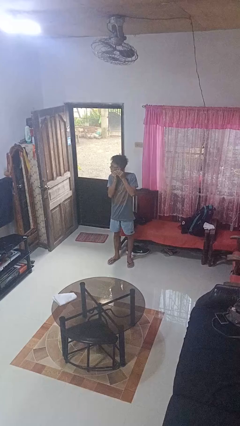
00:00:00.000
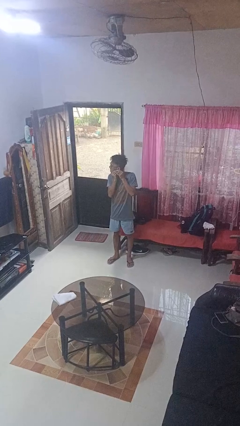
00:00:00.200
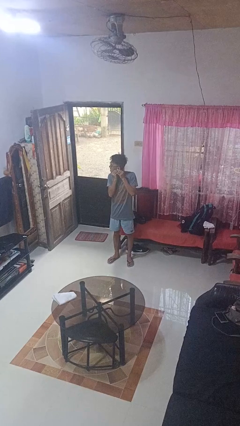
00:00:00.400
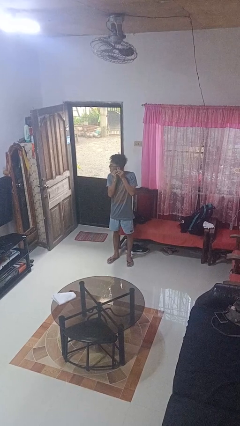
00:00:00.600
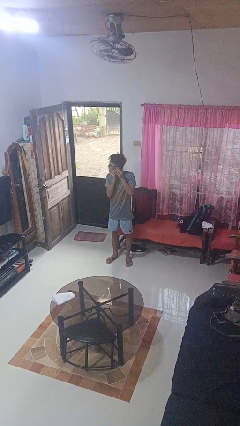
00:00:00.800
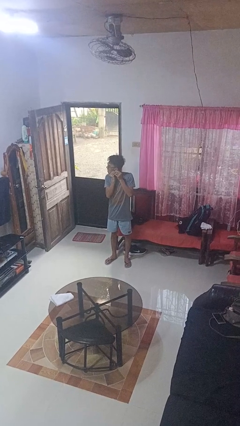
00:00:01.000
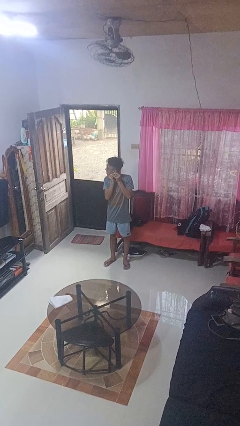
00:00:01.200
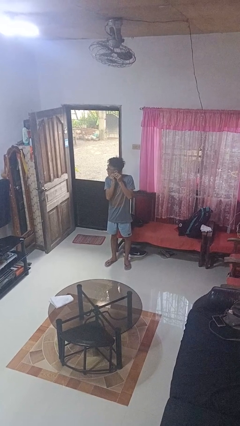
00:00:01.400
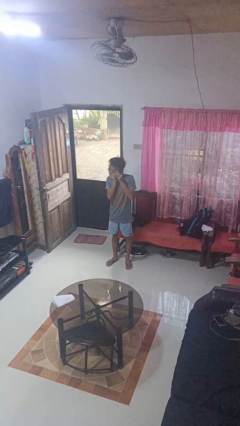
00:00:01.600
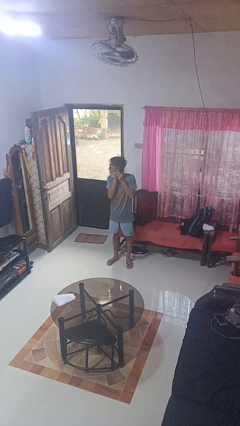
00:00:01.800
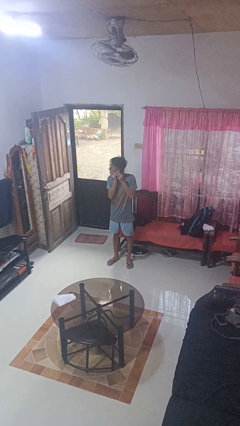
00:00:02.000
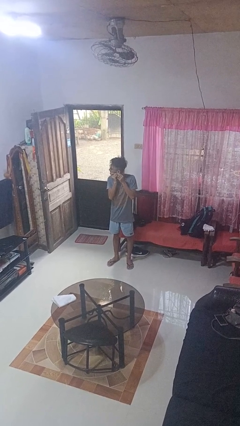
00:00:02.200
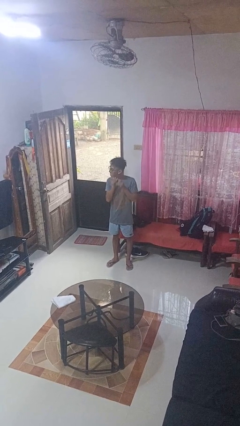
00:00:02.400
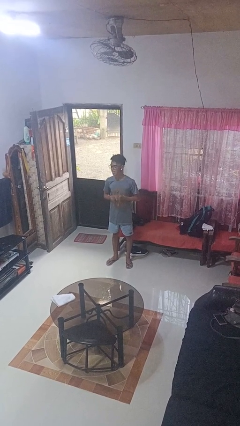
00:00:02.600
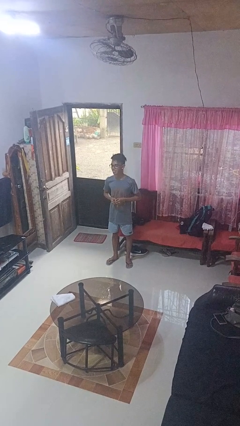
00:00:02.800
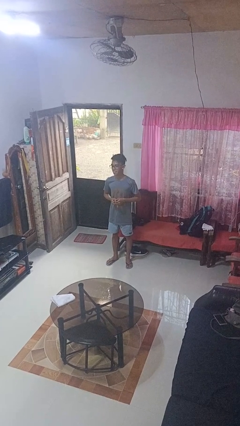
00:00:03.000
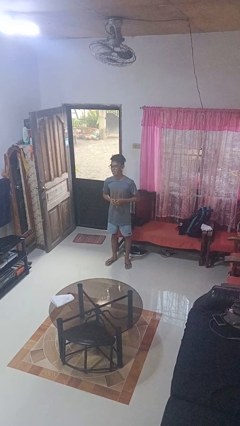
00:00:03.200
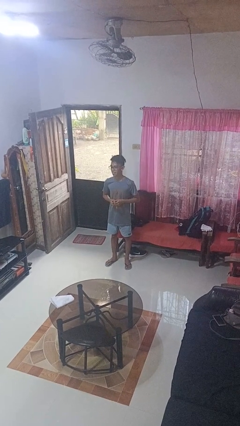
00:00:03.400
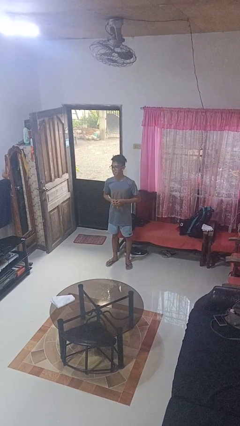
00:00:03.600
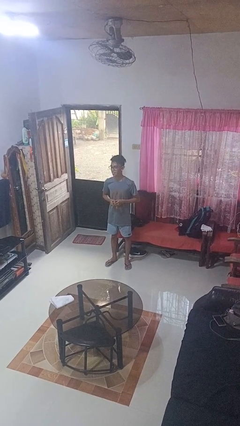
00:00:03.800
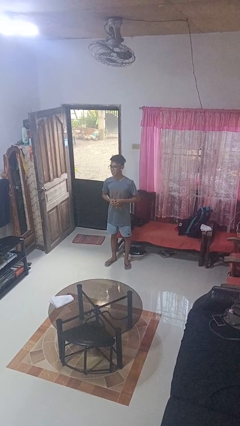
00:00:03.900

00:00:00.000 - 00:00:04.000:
person puts on earrings

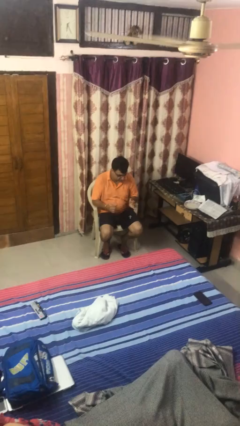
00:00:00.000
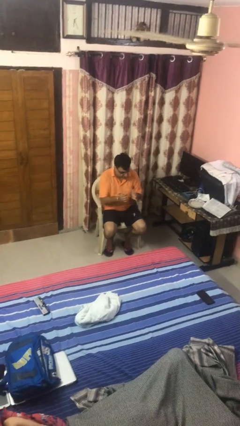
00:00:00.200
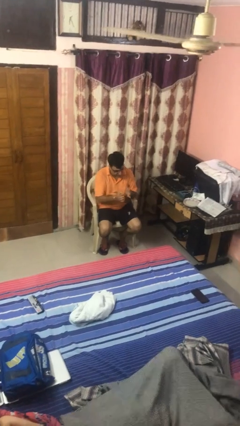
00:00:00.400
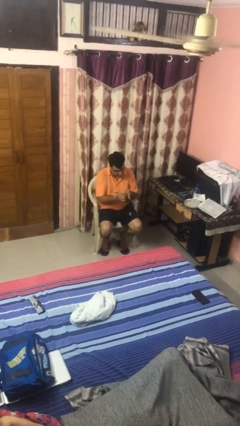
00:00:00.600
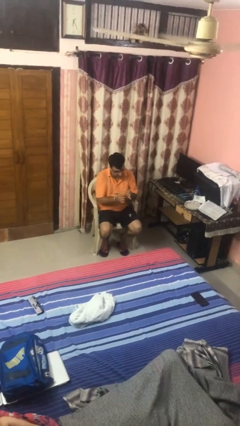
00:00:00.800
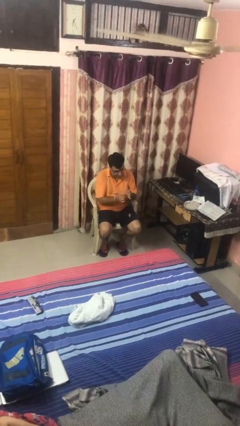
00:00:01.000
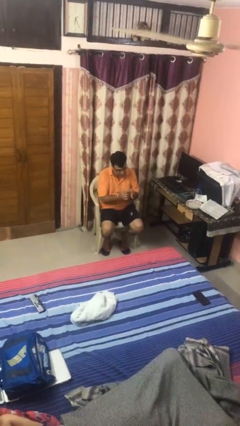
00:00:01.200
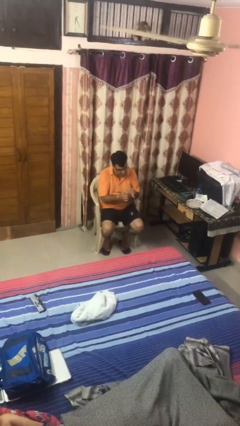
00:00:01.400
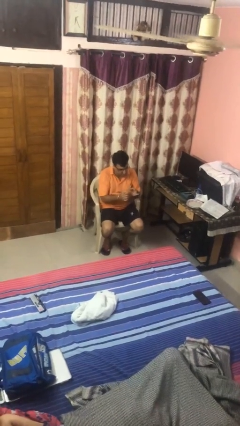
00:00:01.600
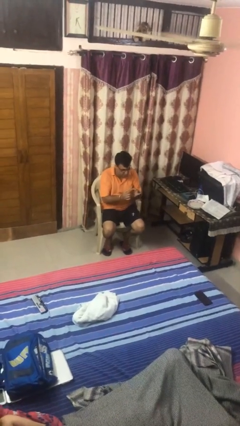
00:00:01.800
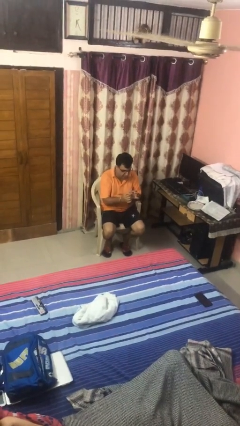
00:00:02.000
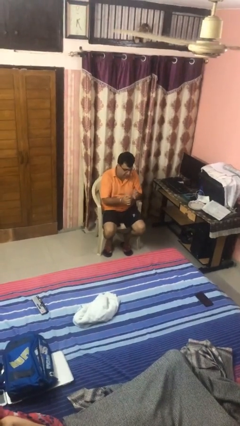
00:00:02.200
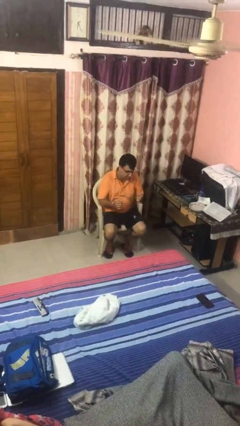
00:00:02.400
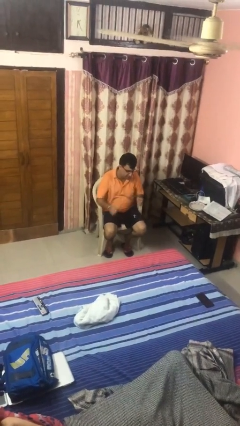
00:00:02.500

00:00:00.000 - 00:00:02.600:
person files fingernails

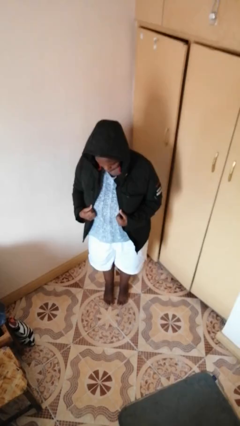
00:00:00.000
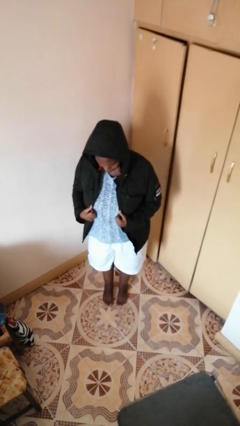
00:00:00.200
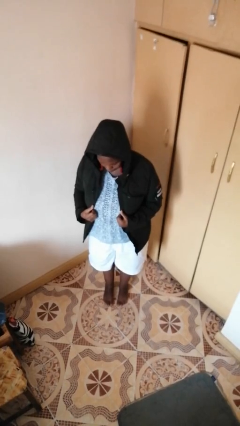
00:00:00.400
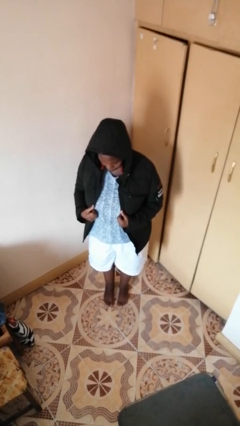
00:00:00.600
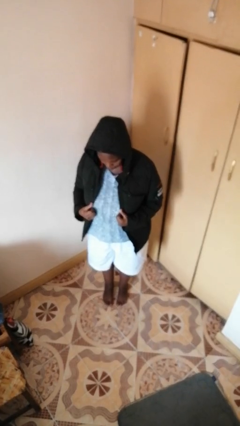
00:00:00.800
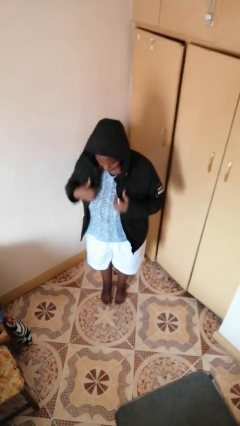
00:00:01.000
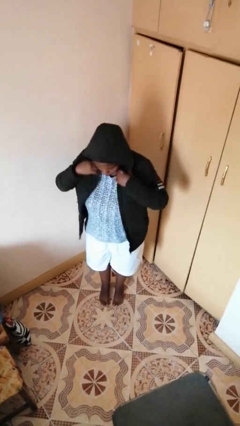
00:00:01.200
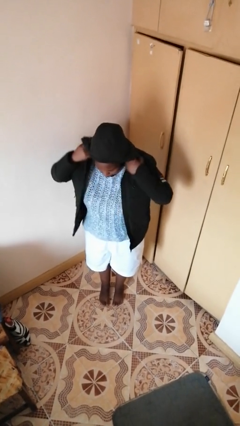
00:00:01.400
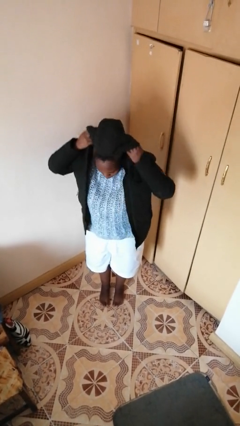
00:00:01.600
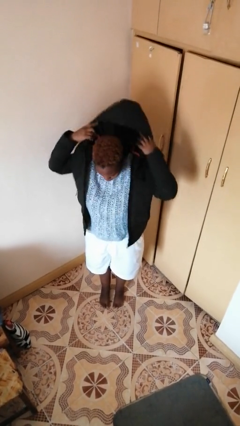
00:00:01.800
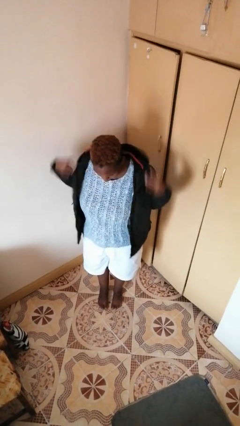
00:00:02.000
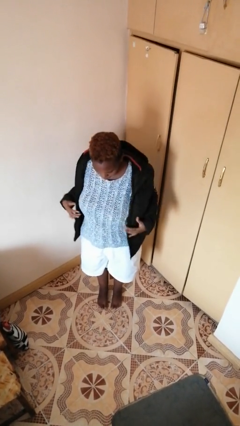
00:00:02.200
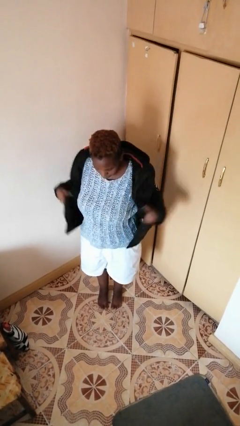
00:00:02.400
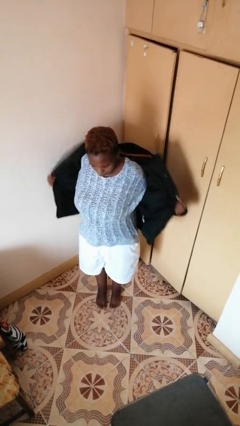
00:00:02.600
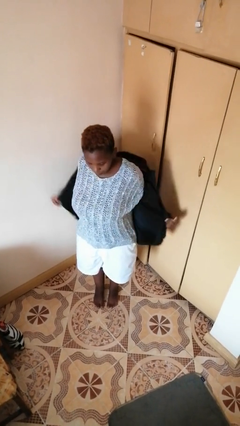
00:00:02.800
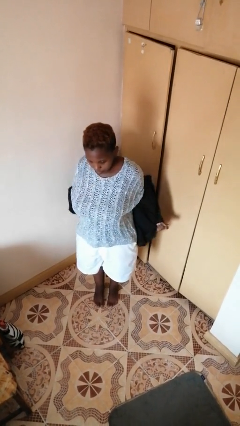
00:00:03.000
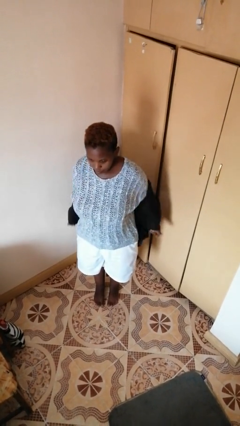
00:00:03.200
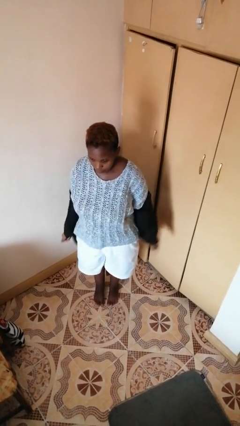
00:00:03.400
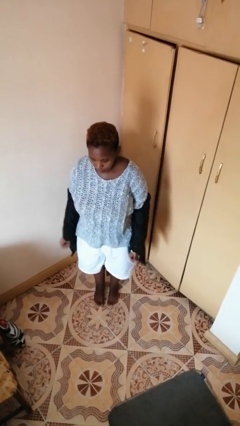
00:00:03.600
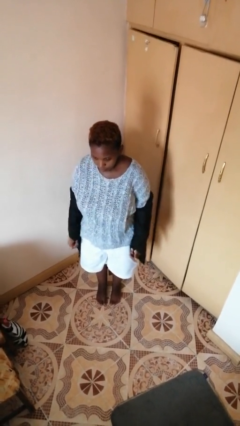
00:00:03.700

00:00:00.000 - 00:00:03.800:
person takes off hoodie

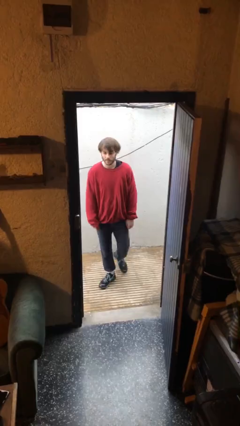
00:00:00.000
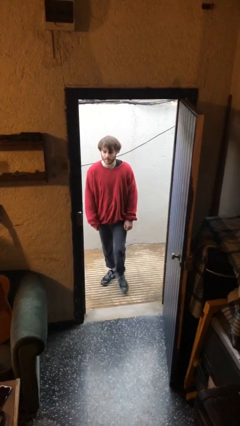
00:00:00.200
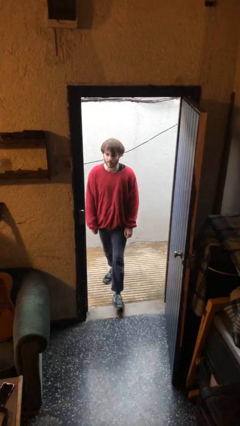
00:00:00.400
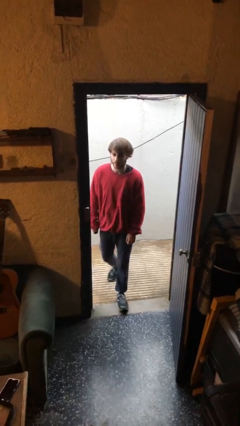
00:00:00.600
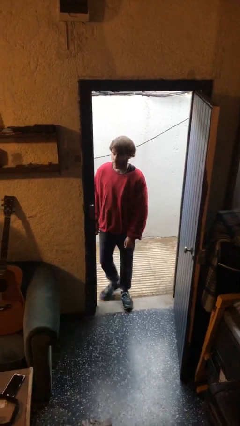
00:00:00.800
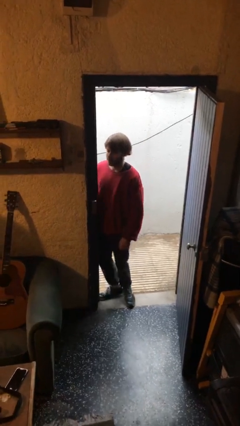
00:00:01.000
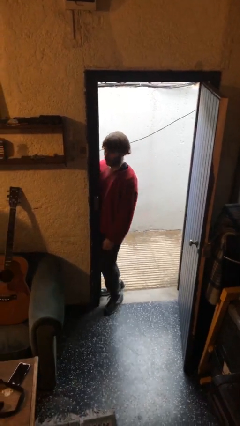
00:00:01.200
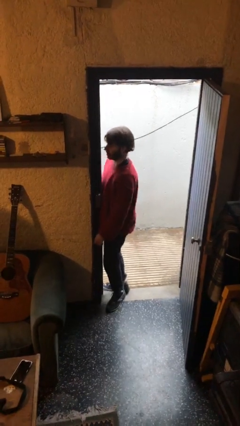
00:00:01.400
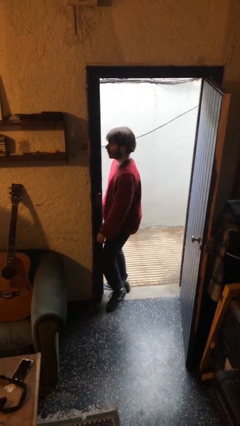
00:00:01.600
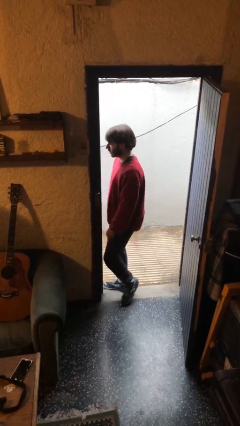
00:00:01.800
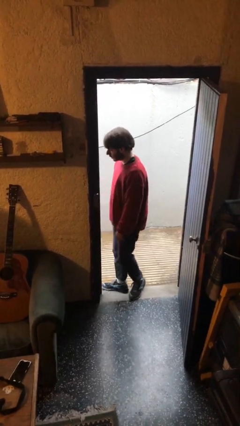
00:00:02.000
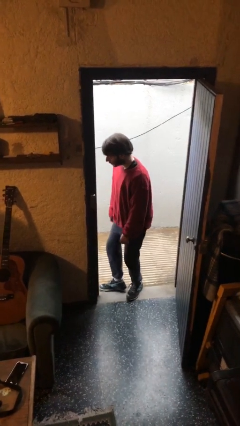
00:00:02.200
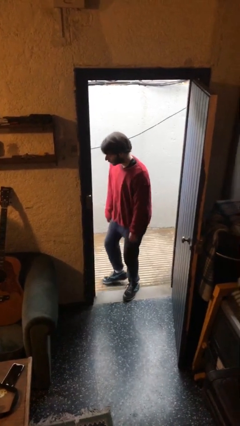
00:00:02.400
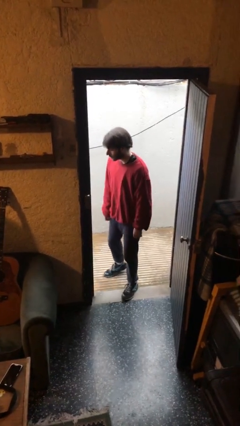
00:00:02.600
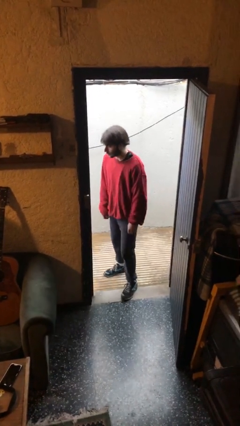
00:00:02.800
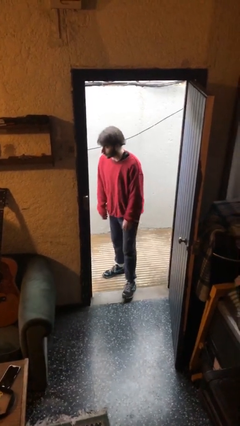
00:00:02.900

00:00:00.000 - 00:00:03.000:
person bumps into wall

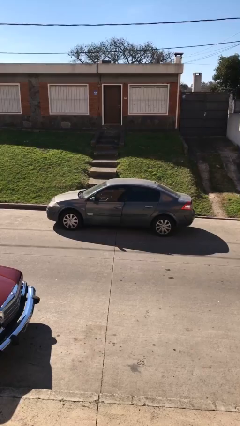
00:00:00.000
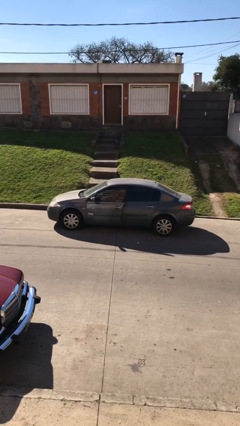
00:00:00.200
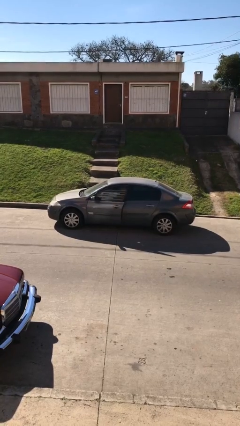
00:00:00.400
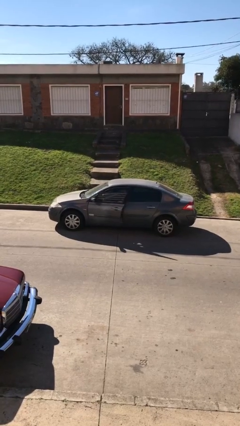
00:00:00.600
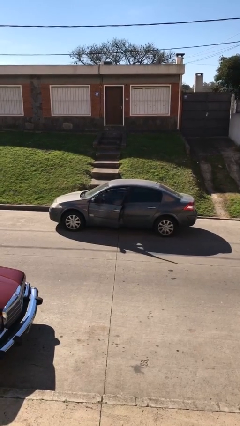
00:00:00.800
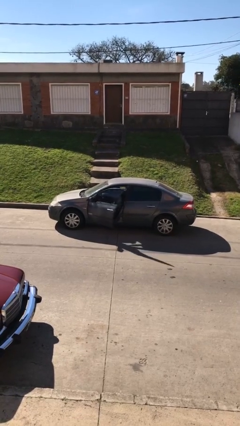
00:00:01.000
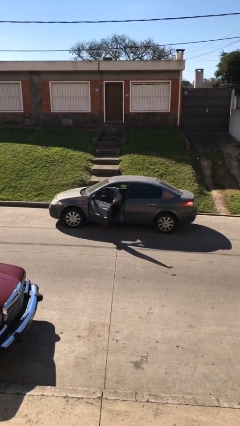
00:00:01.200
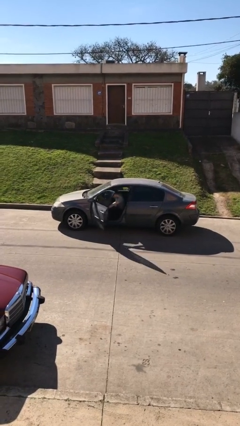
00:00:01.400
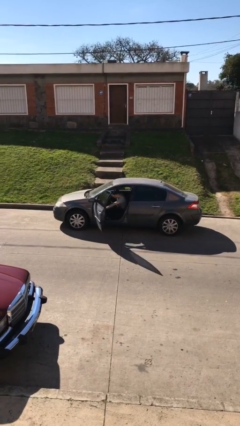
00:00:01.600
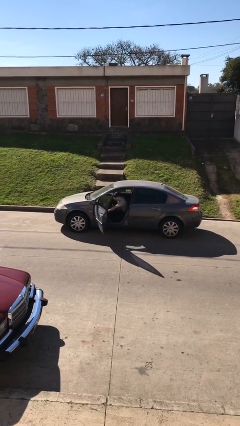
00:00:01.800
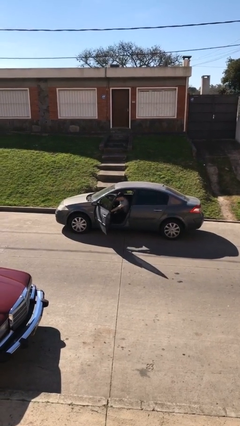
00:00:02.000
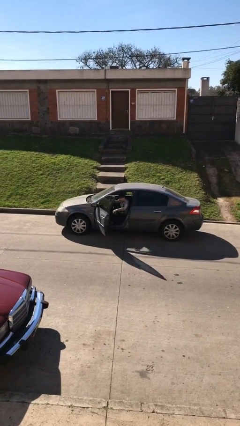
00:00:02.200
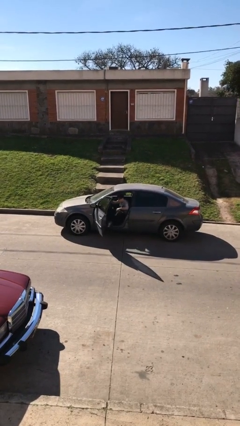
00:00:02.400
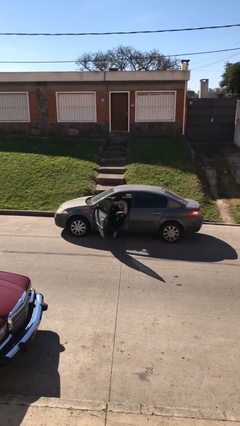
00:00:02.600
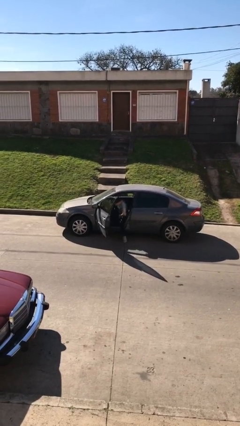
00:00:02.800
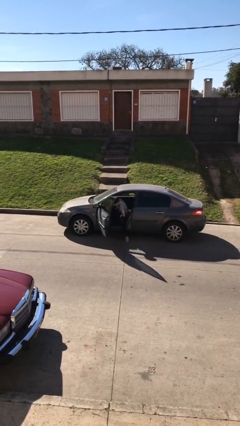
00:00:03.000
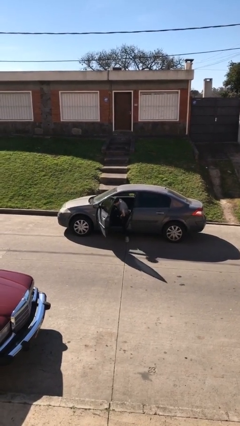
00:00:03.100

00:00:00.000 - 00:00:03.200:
person opens car door

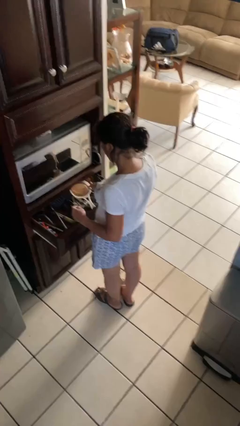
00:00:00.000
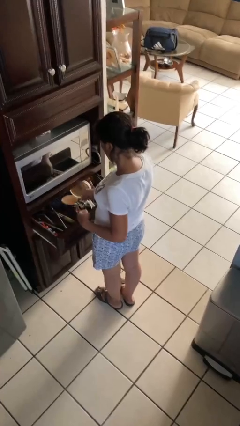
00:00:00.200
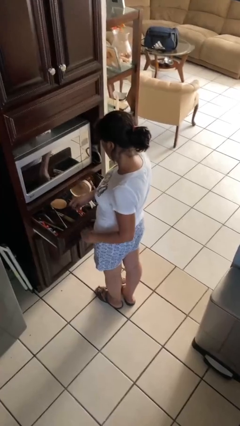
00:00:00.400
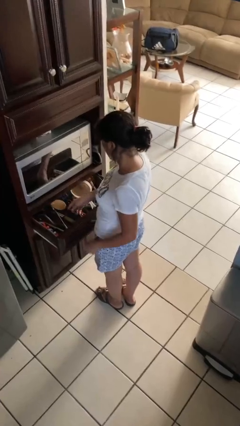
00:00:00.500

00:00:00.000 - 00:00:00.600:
person puts object into kitchen drawer

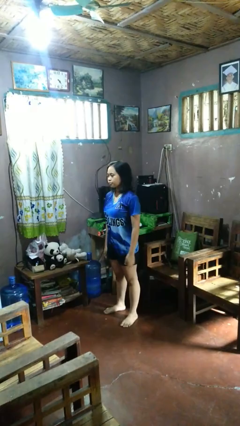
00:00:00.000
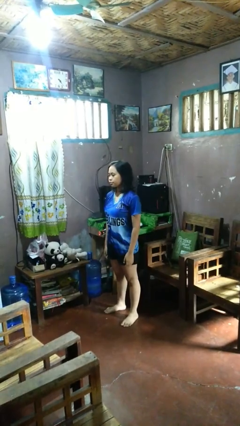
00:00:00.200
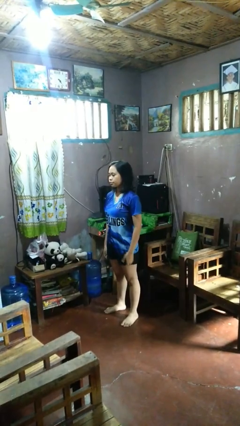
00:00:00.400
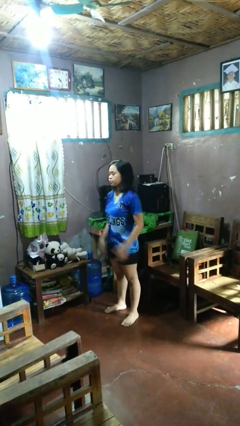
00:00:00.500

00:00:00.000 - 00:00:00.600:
person claps hands
